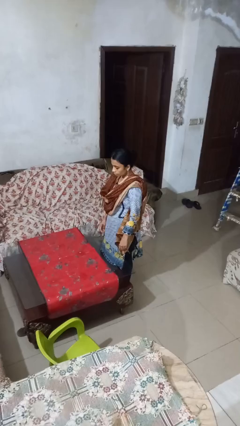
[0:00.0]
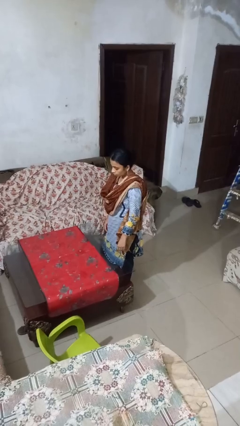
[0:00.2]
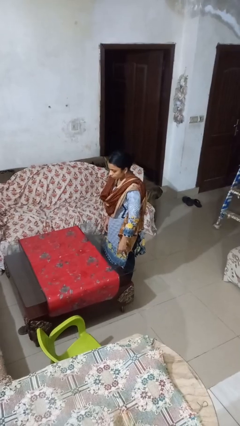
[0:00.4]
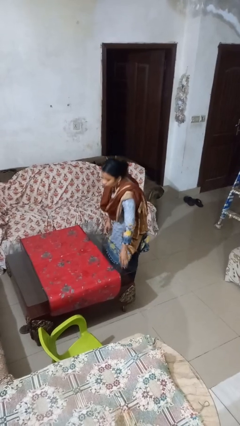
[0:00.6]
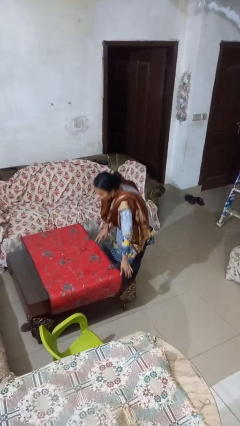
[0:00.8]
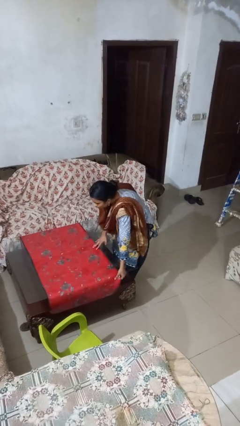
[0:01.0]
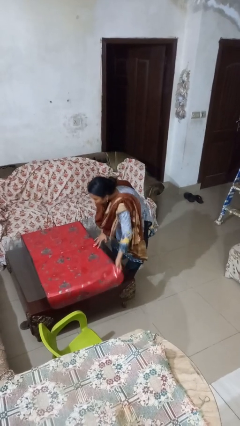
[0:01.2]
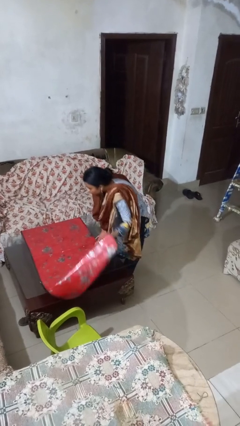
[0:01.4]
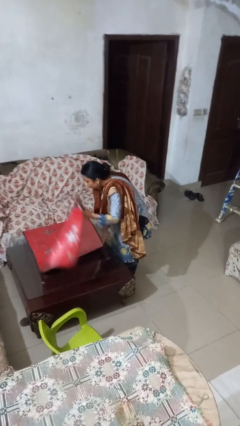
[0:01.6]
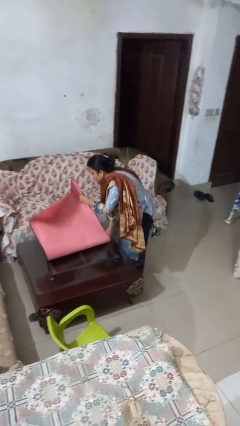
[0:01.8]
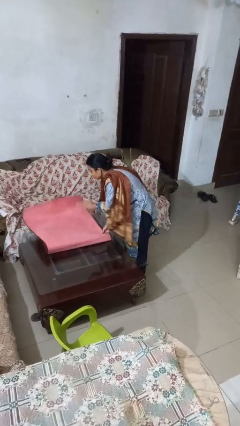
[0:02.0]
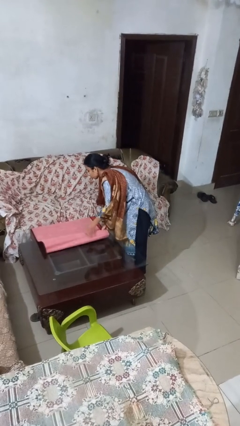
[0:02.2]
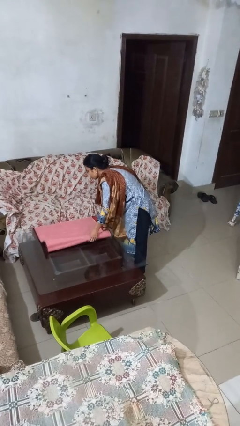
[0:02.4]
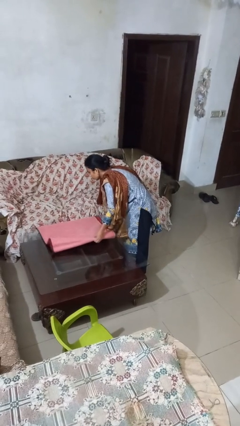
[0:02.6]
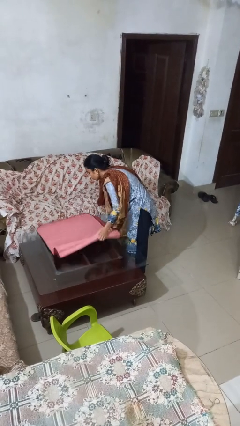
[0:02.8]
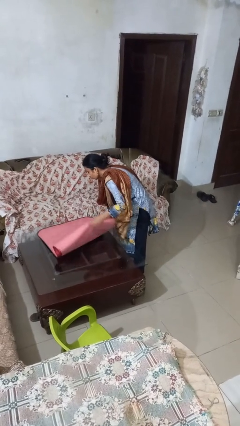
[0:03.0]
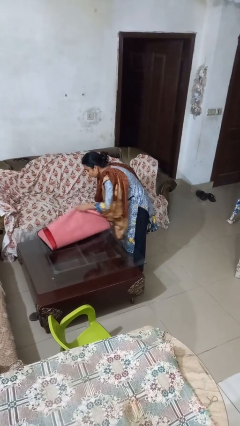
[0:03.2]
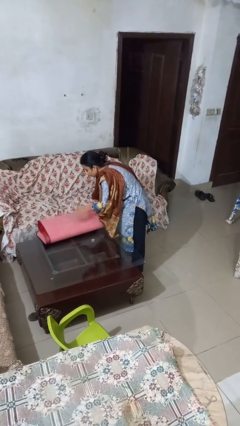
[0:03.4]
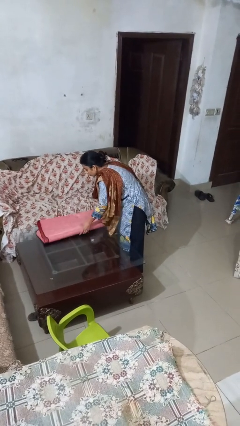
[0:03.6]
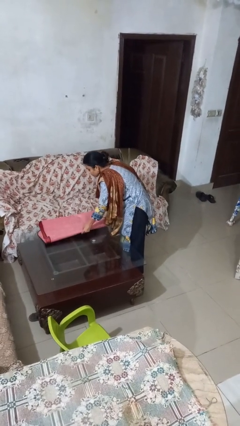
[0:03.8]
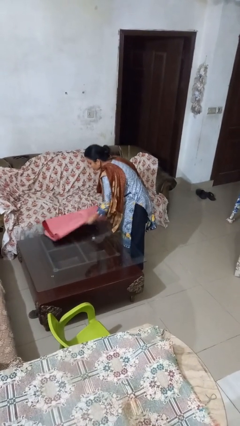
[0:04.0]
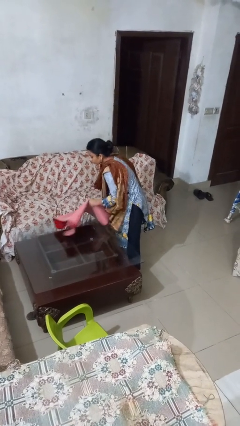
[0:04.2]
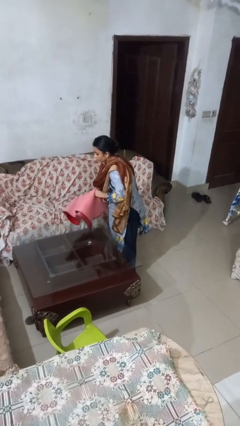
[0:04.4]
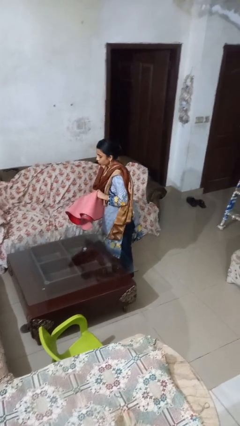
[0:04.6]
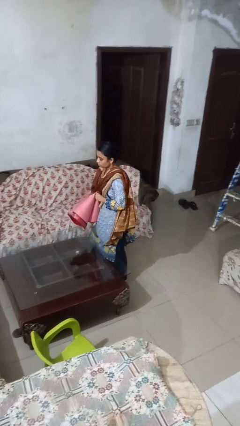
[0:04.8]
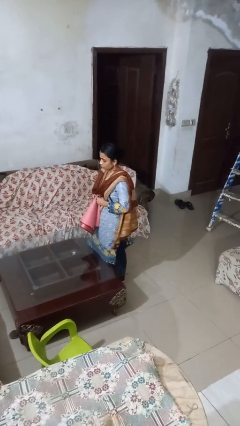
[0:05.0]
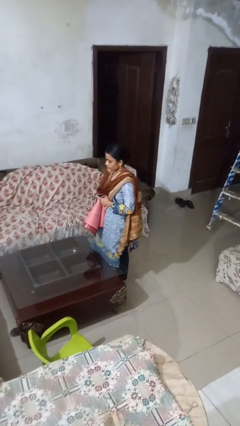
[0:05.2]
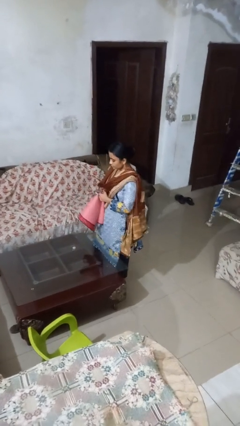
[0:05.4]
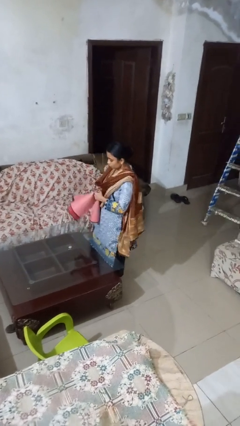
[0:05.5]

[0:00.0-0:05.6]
person folds tablecloth

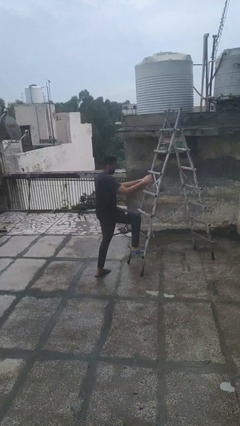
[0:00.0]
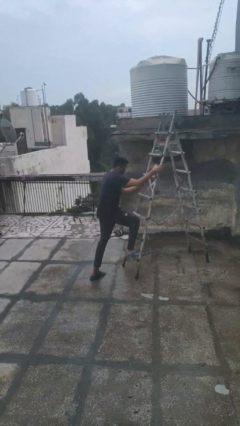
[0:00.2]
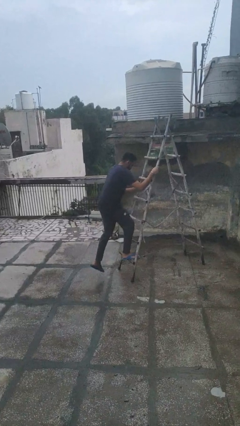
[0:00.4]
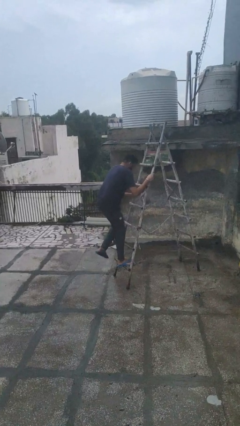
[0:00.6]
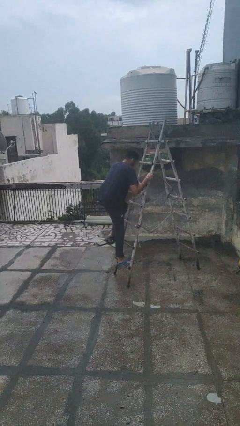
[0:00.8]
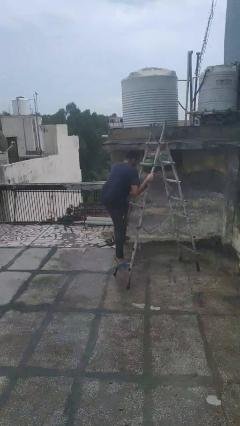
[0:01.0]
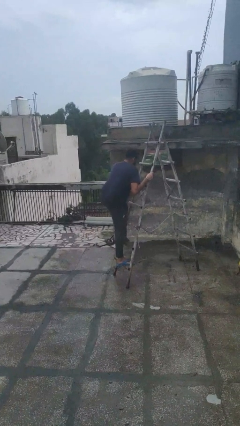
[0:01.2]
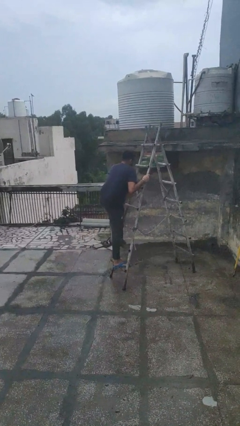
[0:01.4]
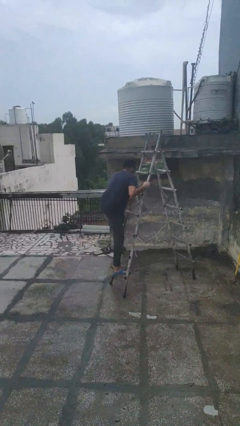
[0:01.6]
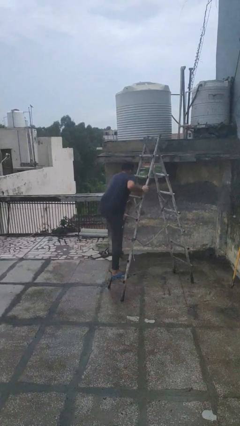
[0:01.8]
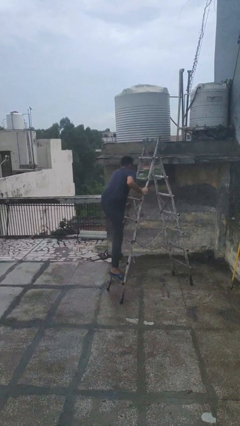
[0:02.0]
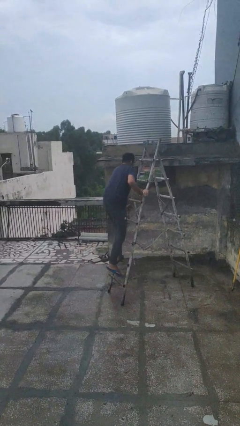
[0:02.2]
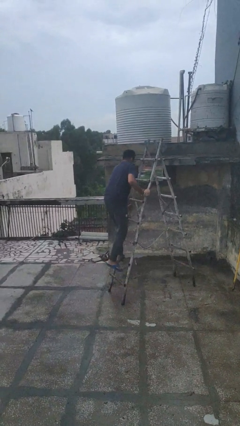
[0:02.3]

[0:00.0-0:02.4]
person climbs up ladder

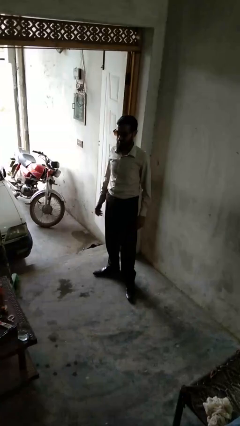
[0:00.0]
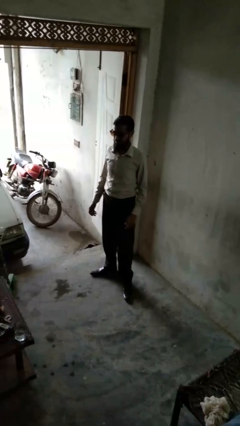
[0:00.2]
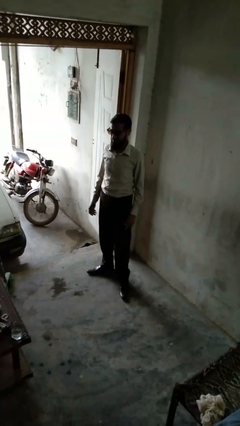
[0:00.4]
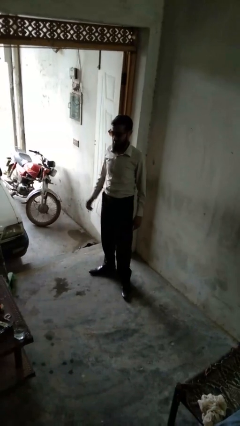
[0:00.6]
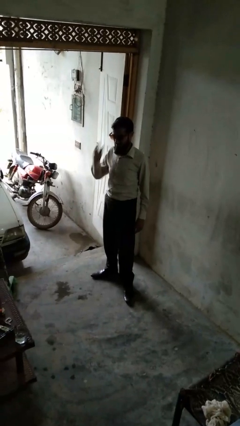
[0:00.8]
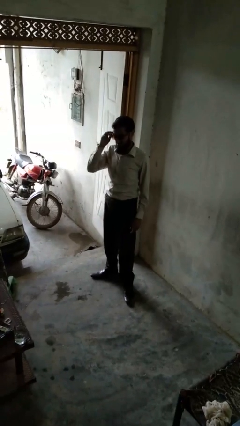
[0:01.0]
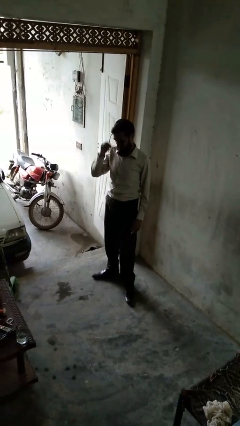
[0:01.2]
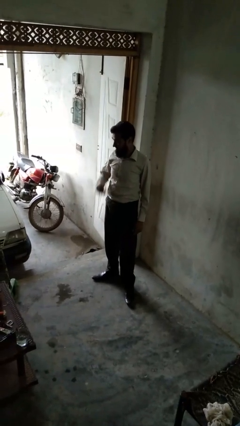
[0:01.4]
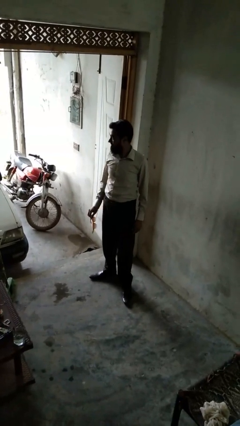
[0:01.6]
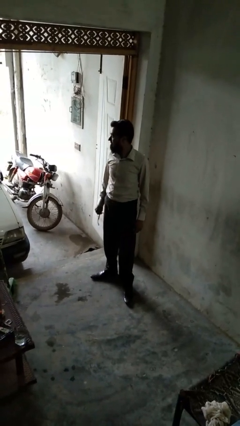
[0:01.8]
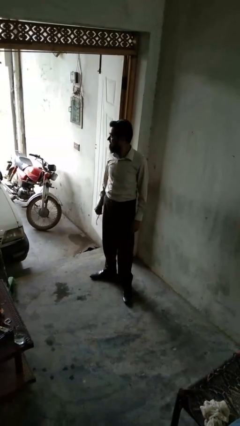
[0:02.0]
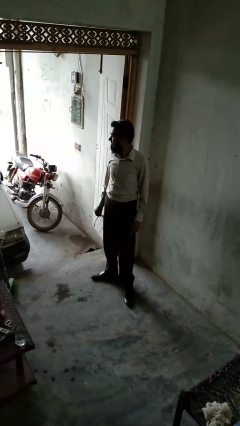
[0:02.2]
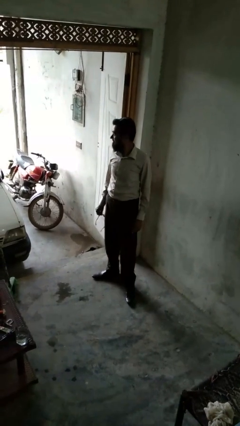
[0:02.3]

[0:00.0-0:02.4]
person takes off sunglasses

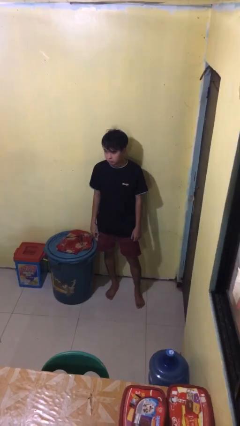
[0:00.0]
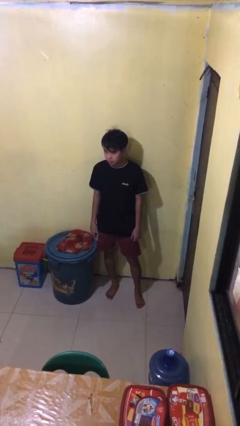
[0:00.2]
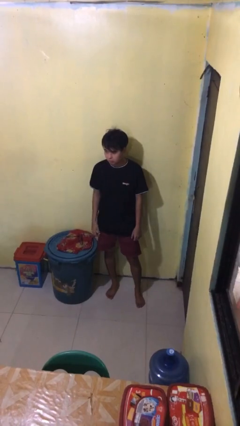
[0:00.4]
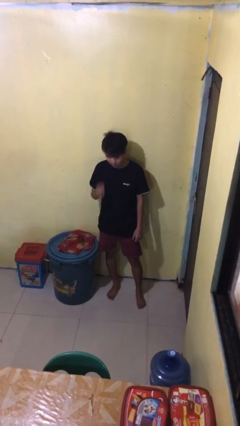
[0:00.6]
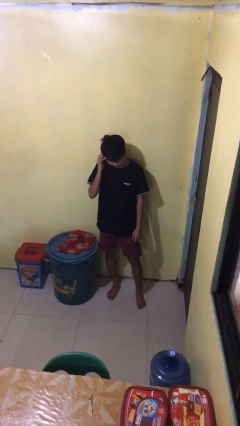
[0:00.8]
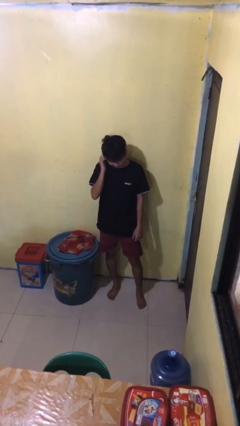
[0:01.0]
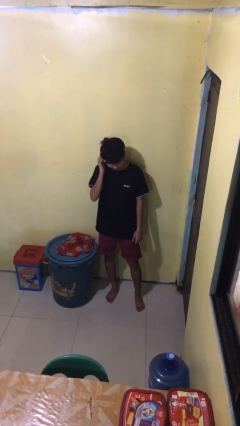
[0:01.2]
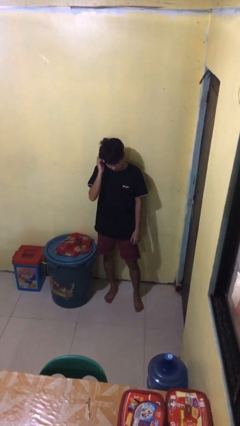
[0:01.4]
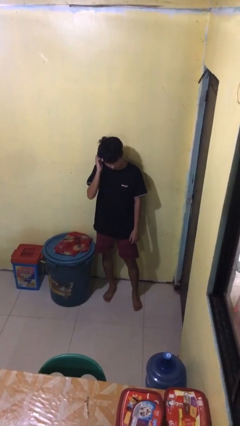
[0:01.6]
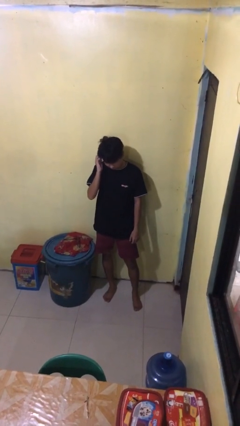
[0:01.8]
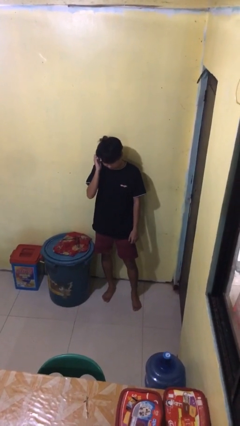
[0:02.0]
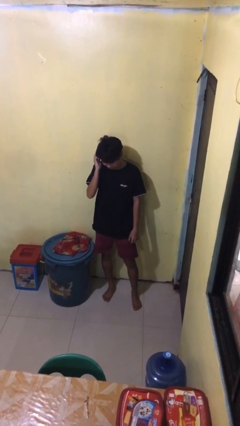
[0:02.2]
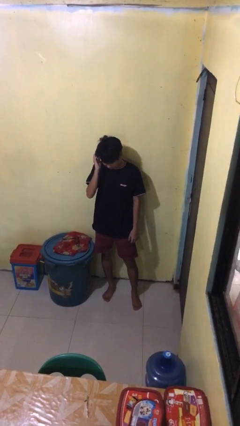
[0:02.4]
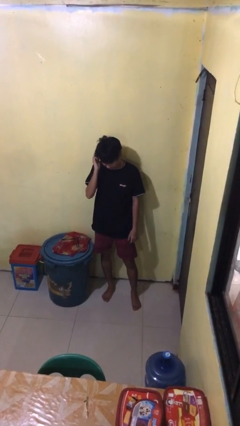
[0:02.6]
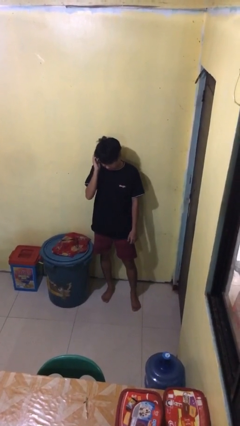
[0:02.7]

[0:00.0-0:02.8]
person scratches face

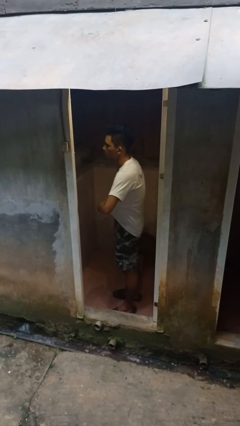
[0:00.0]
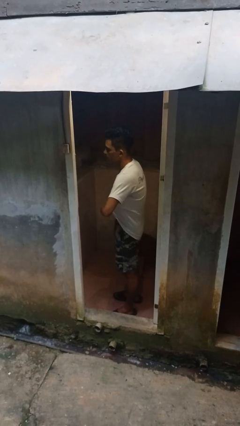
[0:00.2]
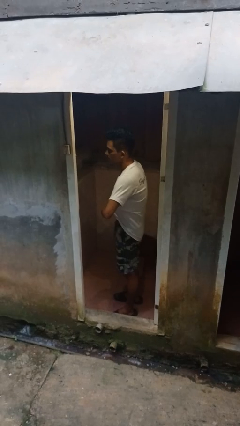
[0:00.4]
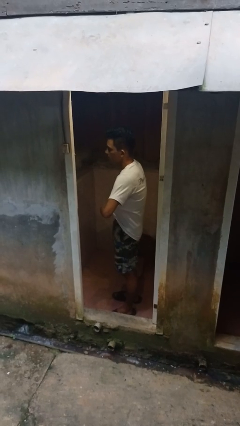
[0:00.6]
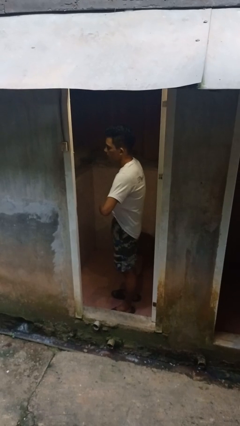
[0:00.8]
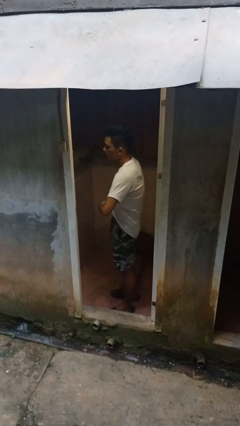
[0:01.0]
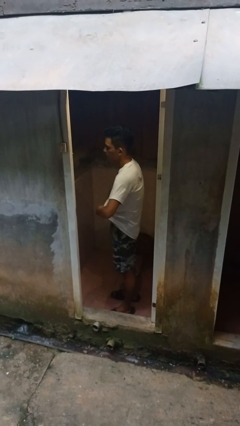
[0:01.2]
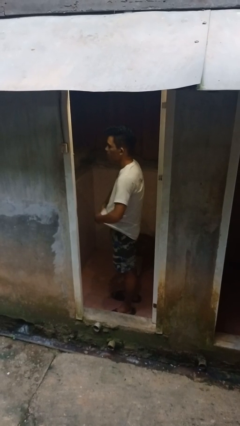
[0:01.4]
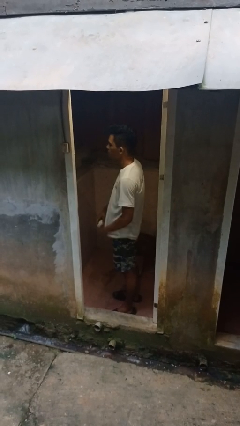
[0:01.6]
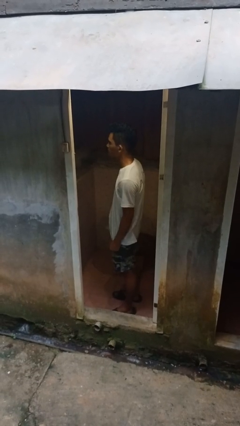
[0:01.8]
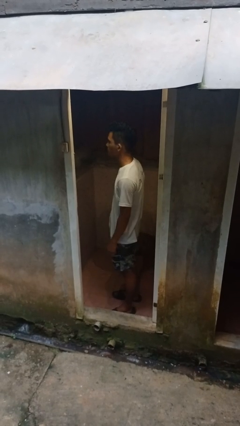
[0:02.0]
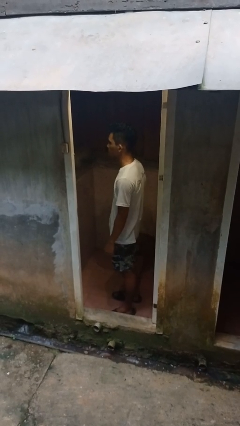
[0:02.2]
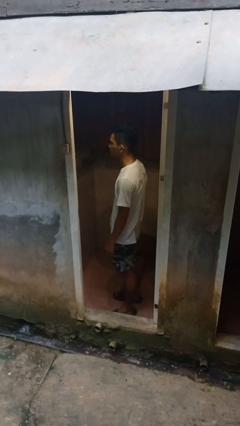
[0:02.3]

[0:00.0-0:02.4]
person applies deodorant

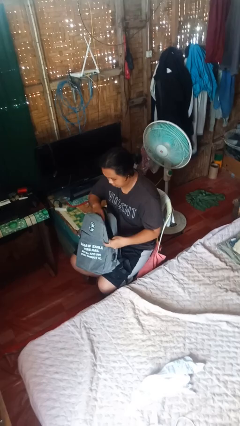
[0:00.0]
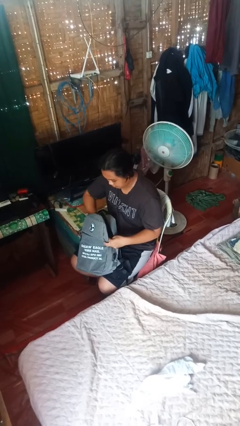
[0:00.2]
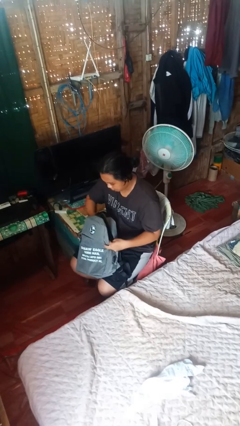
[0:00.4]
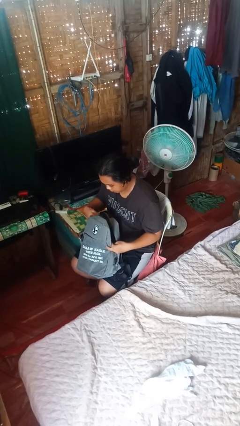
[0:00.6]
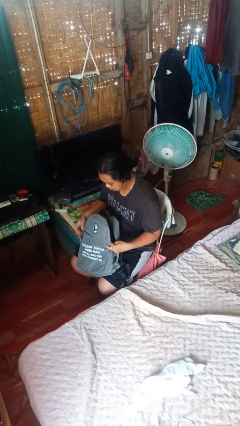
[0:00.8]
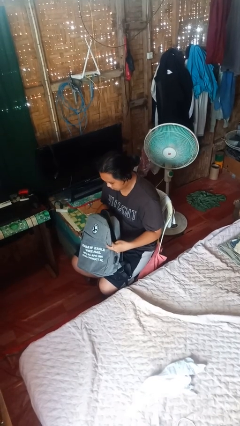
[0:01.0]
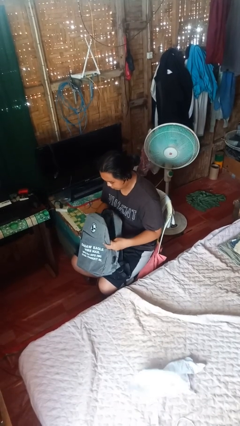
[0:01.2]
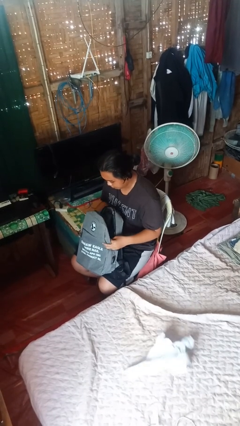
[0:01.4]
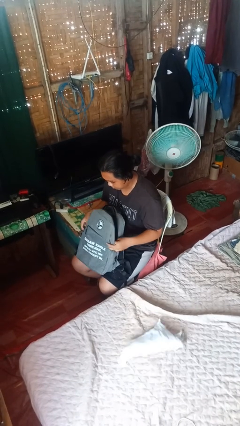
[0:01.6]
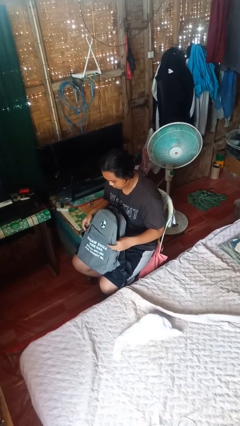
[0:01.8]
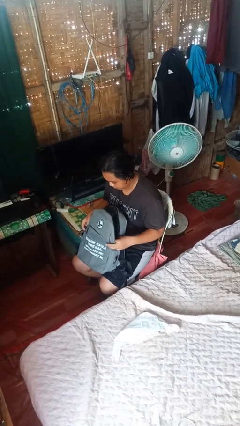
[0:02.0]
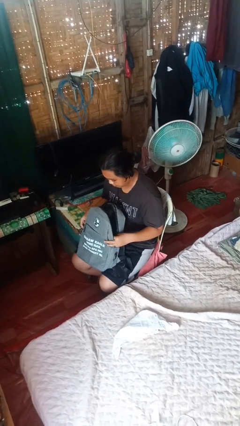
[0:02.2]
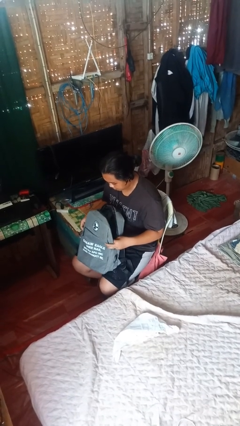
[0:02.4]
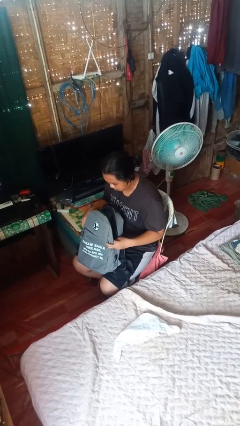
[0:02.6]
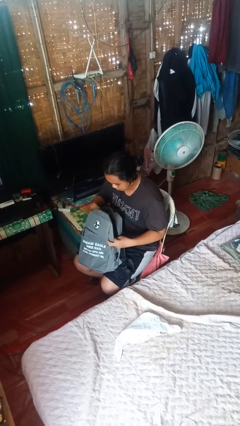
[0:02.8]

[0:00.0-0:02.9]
person puts object into backpack
